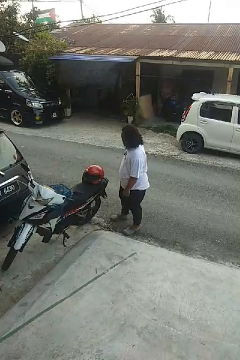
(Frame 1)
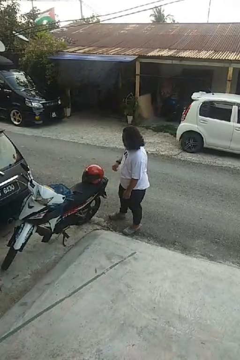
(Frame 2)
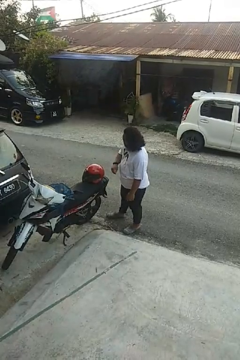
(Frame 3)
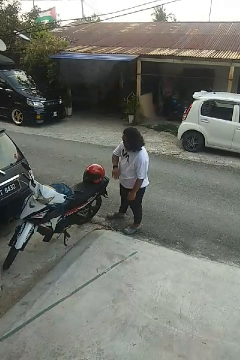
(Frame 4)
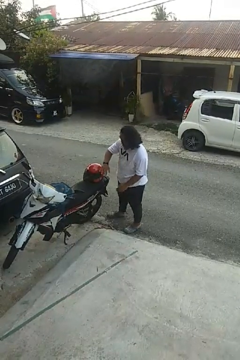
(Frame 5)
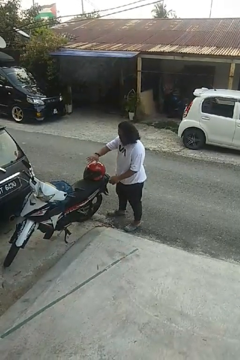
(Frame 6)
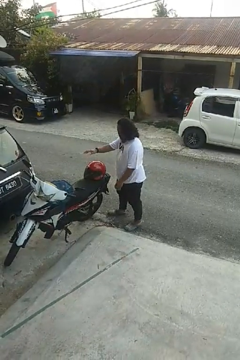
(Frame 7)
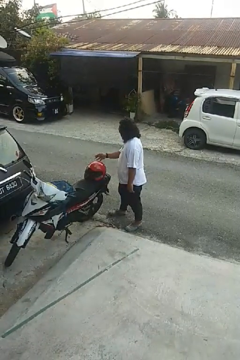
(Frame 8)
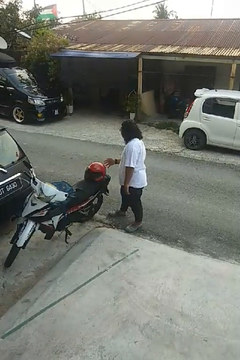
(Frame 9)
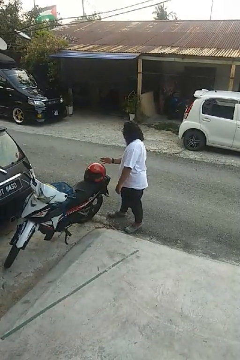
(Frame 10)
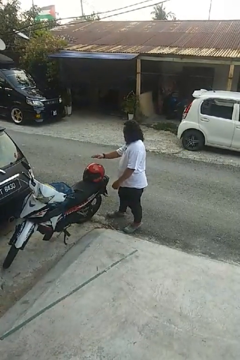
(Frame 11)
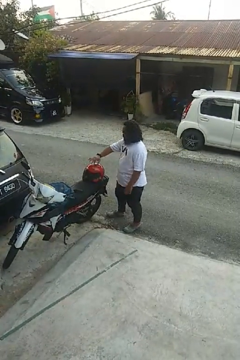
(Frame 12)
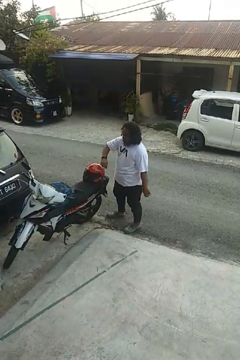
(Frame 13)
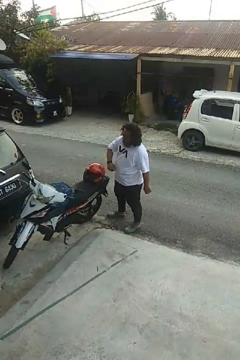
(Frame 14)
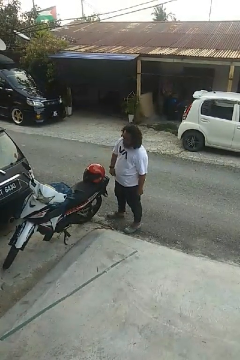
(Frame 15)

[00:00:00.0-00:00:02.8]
person waves hand over object

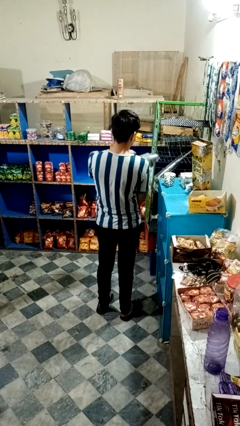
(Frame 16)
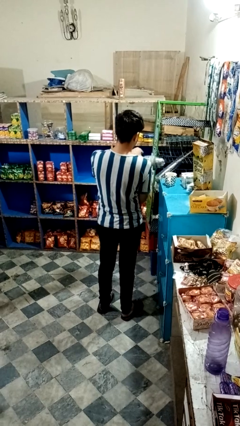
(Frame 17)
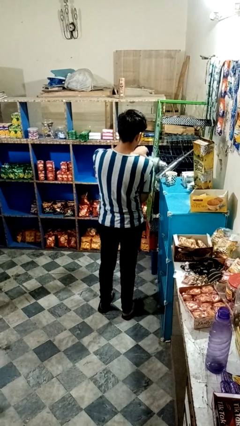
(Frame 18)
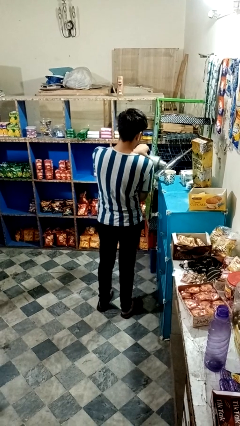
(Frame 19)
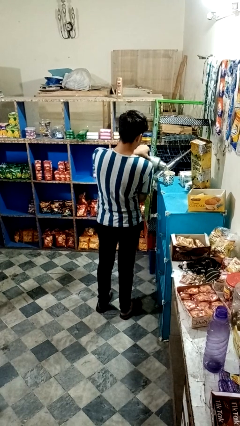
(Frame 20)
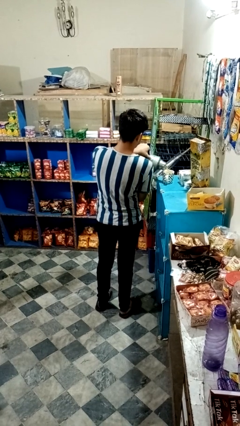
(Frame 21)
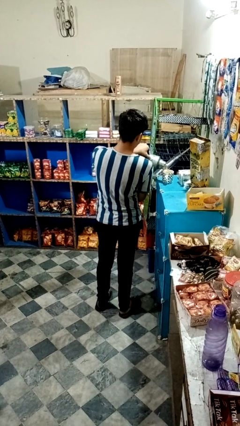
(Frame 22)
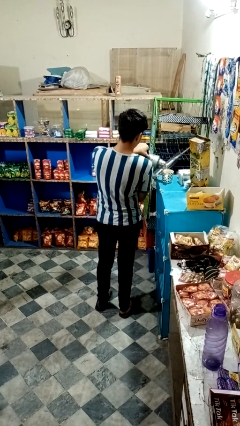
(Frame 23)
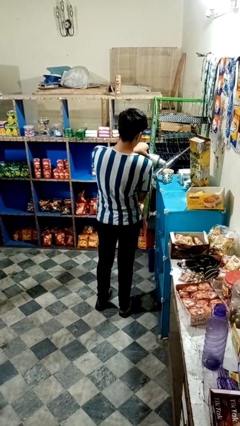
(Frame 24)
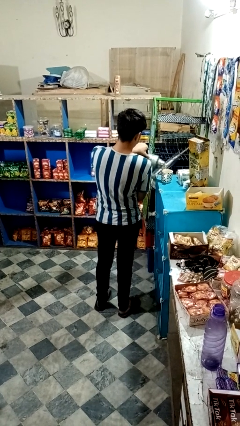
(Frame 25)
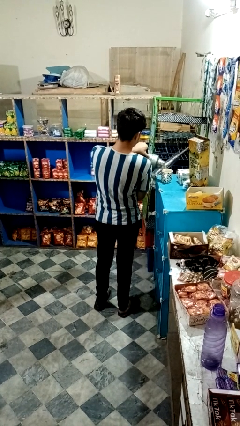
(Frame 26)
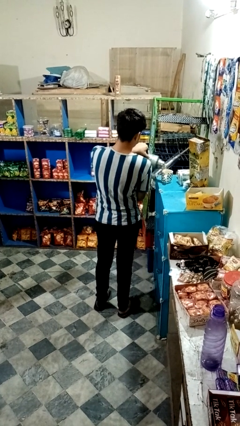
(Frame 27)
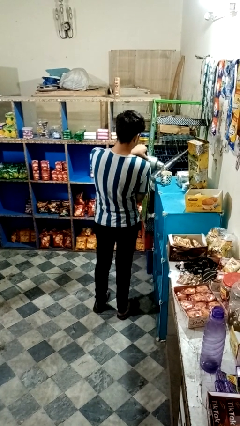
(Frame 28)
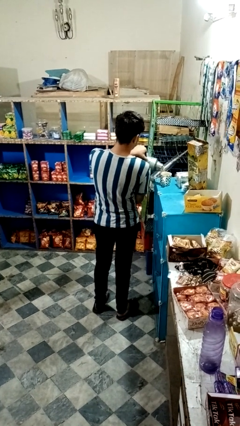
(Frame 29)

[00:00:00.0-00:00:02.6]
person pours coffee into mug

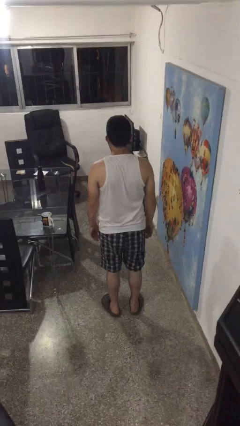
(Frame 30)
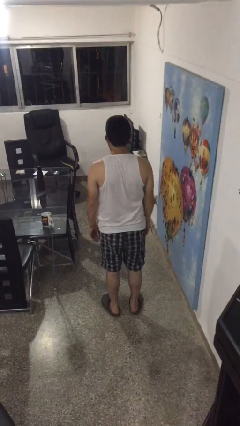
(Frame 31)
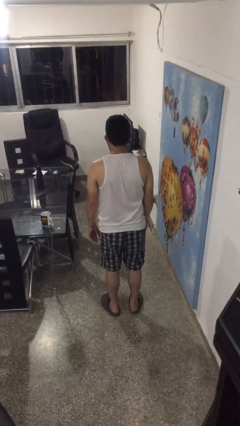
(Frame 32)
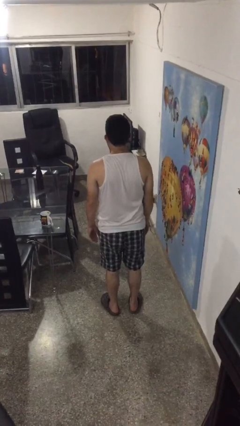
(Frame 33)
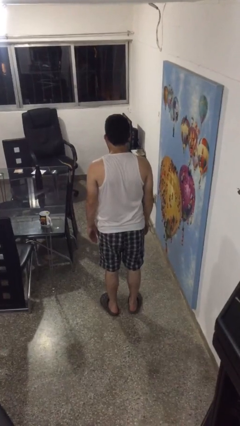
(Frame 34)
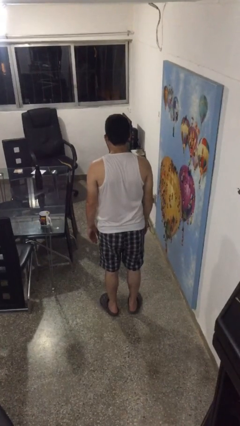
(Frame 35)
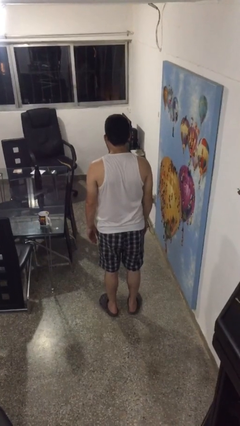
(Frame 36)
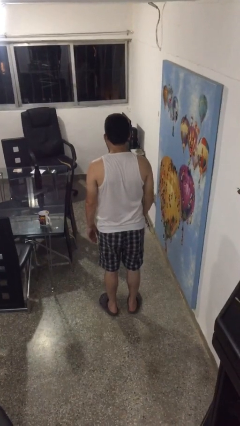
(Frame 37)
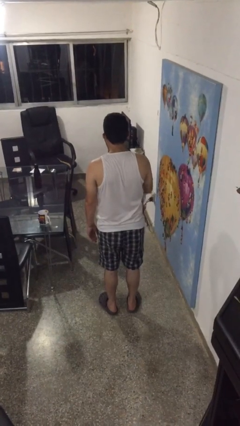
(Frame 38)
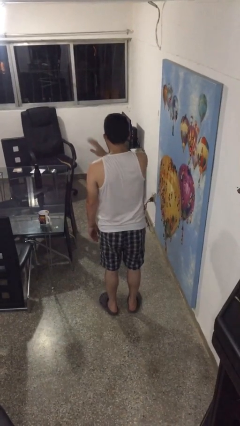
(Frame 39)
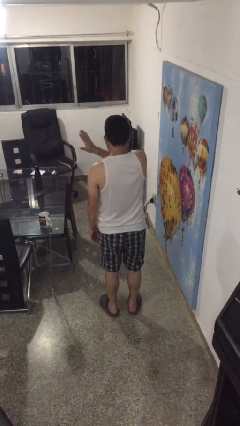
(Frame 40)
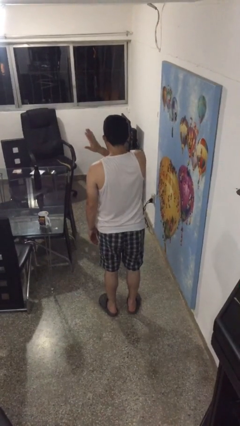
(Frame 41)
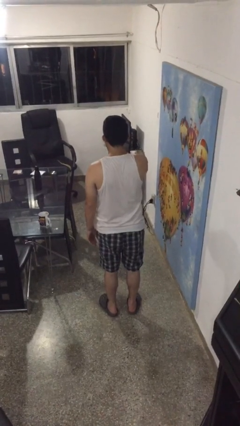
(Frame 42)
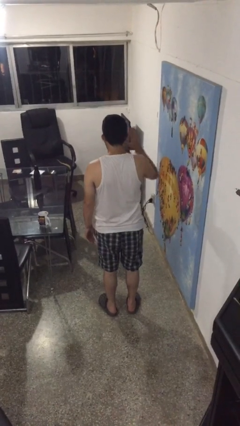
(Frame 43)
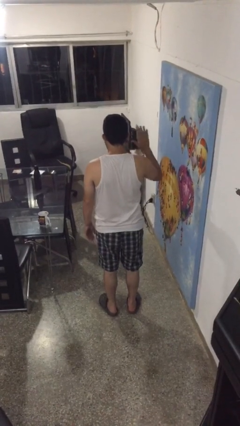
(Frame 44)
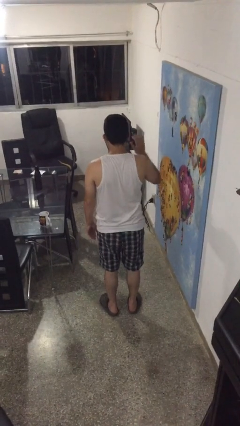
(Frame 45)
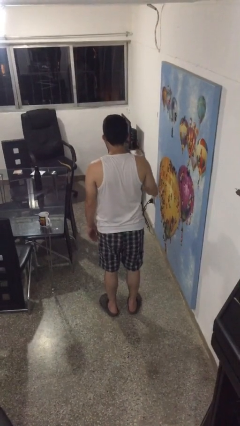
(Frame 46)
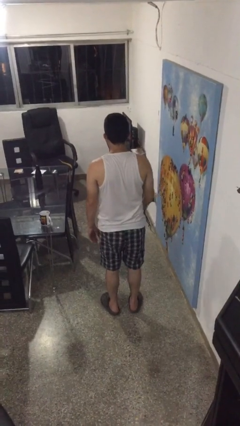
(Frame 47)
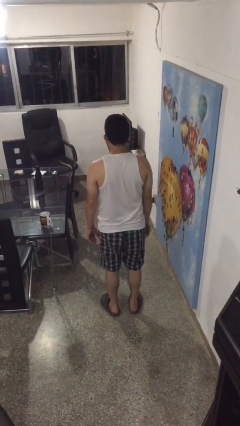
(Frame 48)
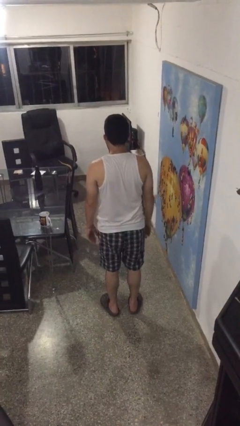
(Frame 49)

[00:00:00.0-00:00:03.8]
person gestures swipe right

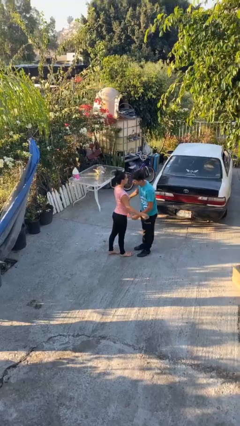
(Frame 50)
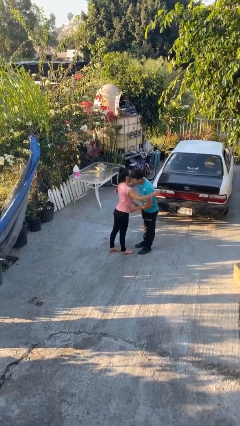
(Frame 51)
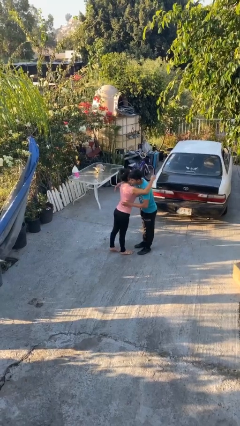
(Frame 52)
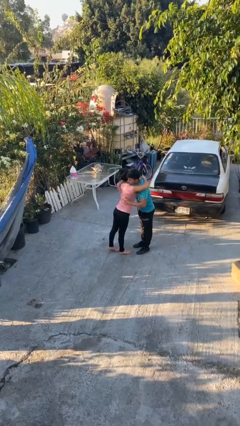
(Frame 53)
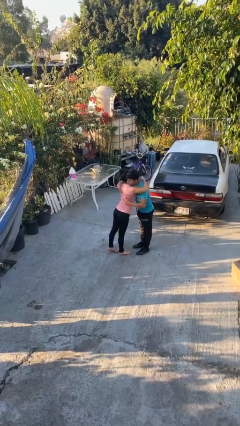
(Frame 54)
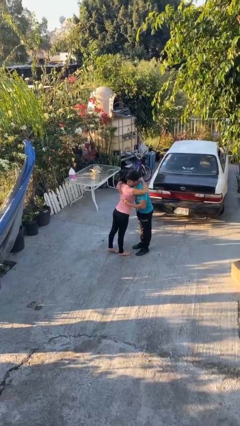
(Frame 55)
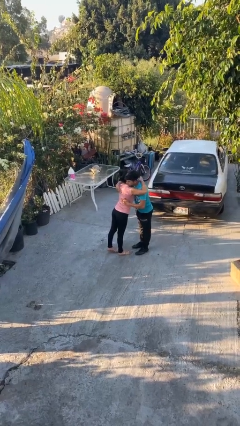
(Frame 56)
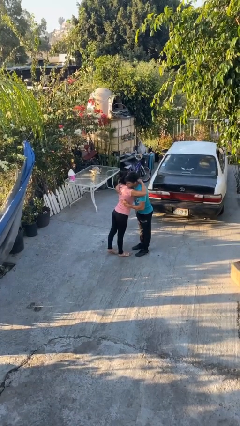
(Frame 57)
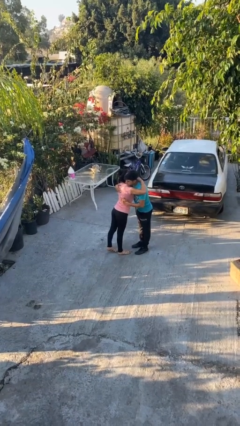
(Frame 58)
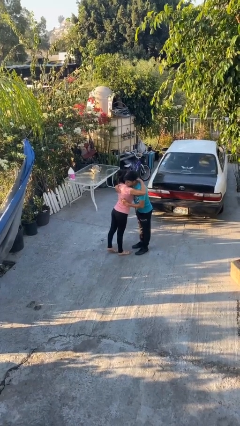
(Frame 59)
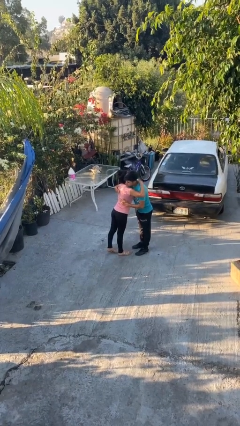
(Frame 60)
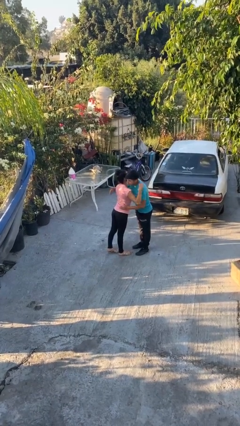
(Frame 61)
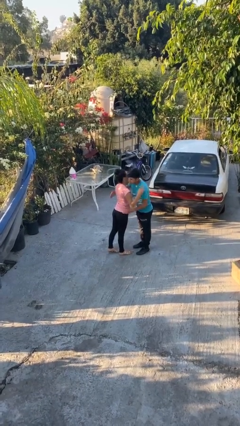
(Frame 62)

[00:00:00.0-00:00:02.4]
person embraces person

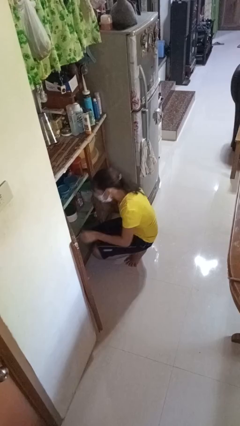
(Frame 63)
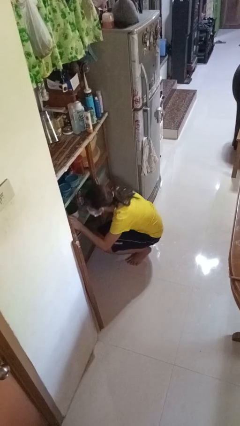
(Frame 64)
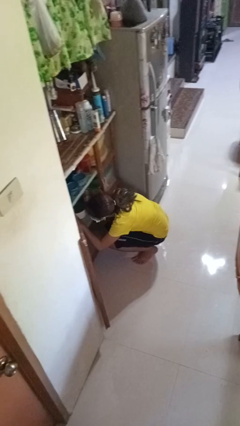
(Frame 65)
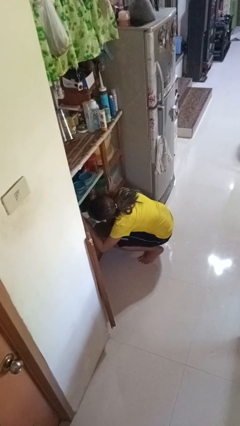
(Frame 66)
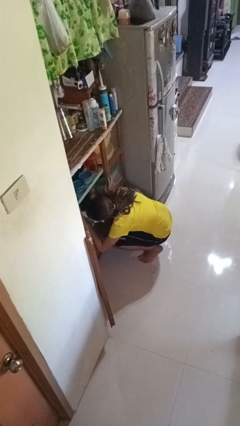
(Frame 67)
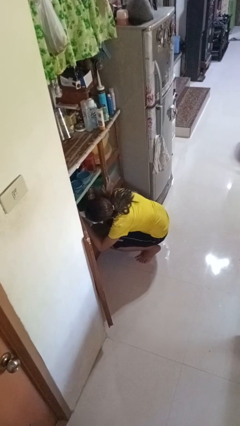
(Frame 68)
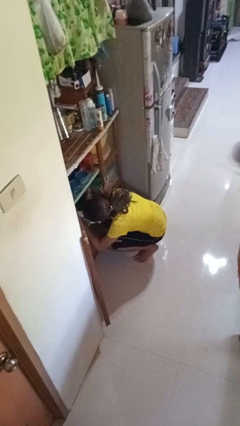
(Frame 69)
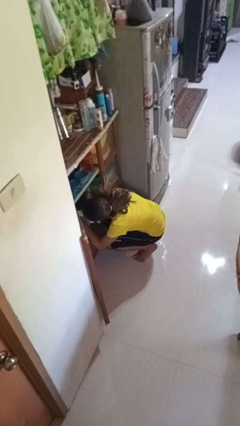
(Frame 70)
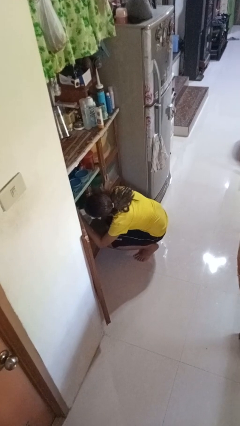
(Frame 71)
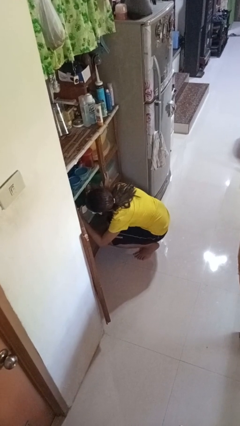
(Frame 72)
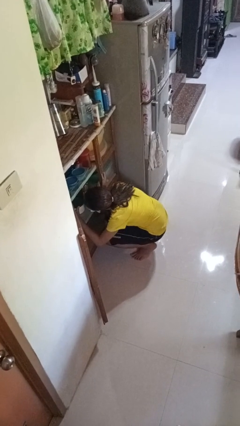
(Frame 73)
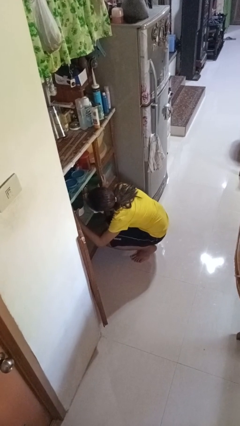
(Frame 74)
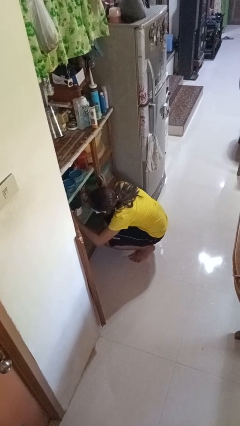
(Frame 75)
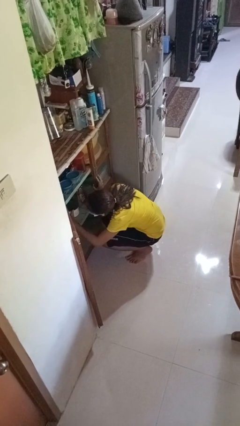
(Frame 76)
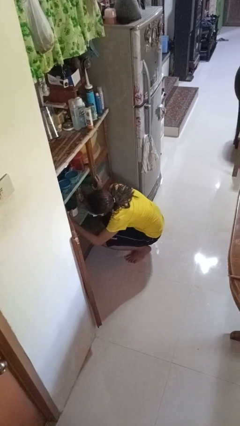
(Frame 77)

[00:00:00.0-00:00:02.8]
person searches in cabinet

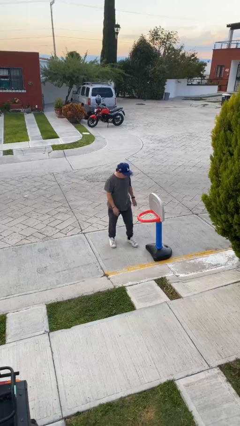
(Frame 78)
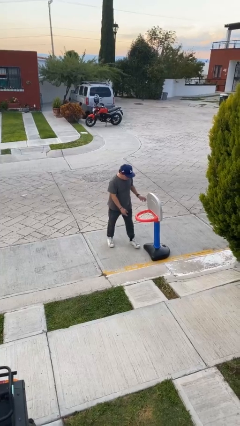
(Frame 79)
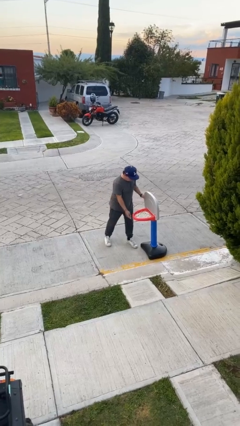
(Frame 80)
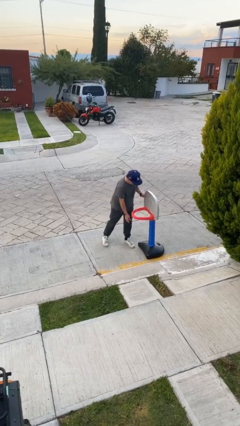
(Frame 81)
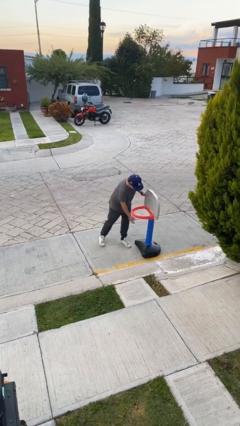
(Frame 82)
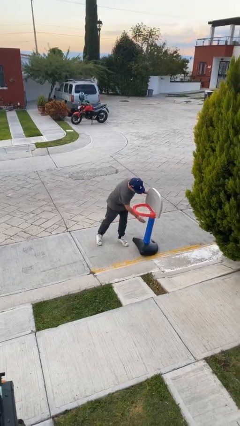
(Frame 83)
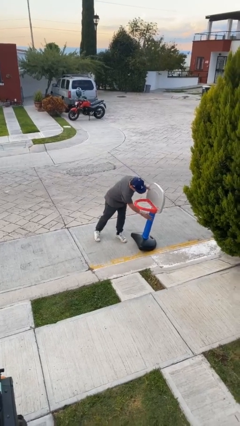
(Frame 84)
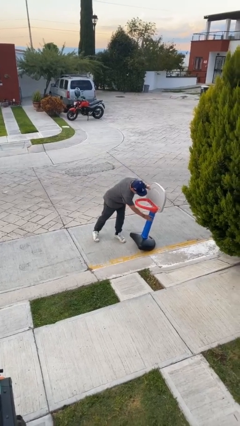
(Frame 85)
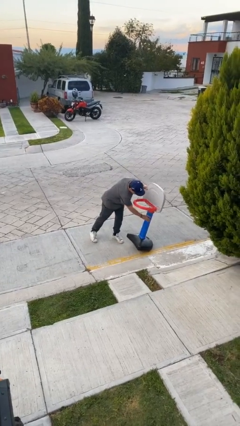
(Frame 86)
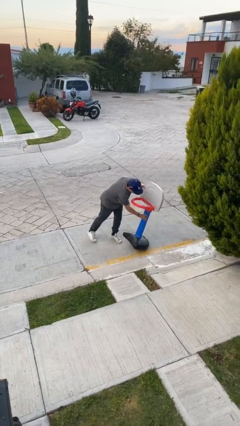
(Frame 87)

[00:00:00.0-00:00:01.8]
person picks up object from floor

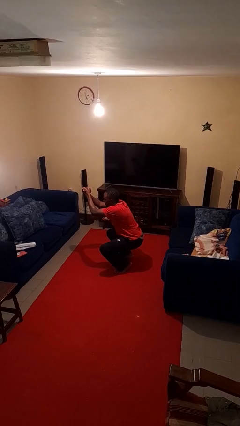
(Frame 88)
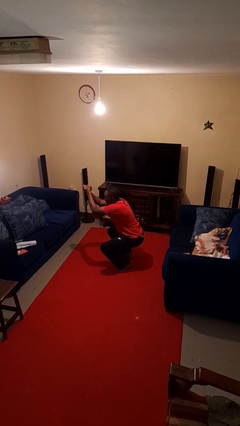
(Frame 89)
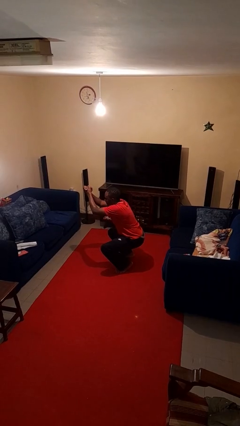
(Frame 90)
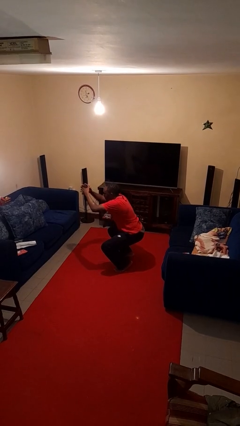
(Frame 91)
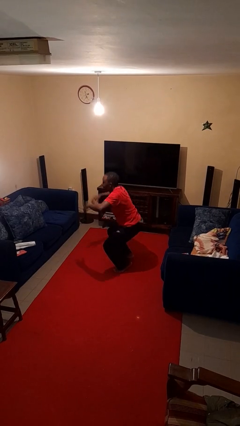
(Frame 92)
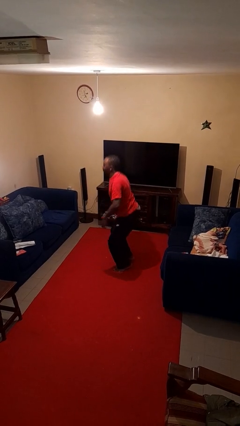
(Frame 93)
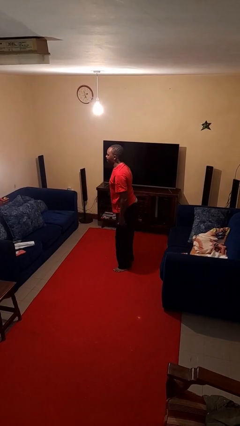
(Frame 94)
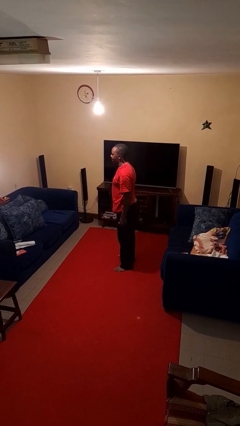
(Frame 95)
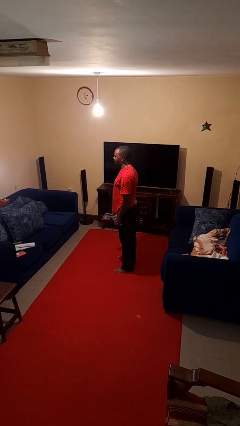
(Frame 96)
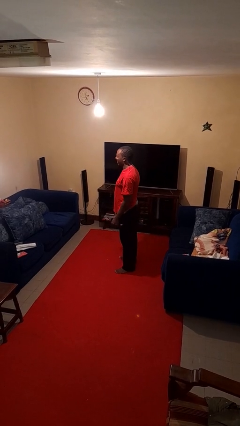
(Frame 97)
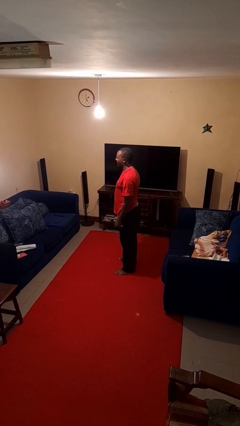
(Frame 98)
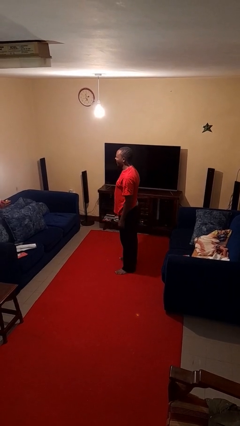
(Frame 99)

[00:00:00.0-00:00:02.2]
person stands up
